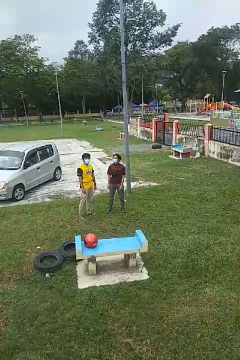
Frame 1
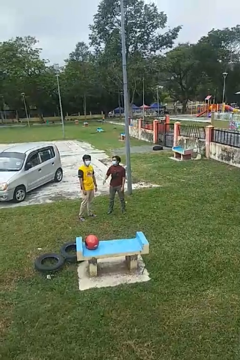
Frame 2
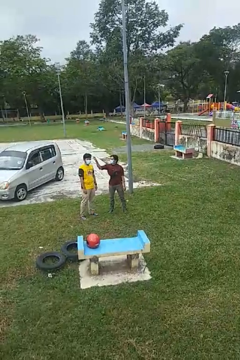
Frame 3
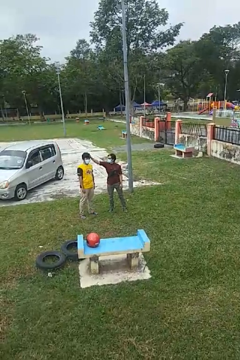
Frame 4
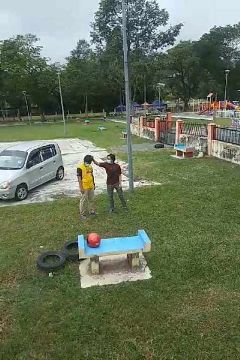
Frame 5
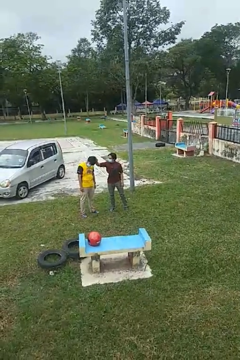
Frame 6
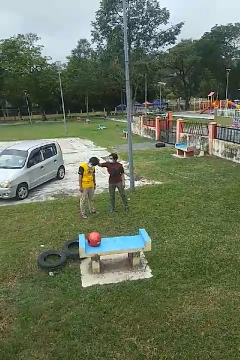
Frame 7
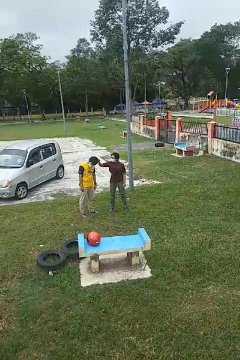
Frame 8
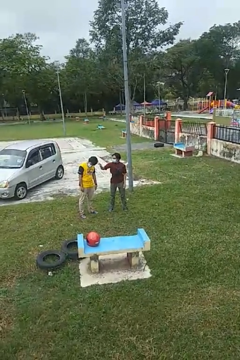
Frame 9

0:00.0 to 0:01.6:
person grabs person by hair

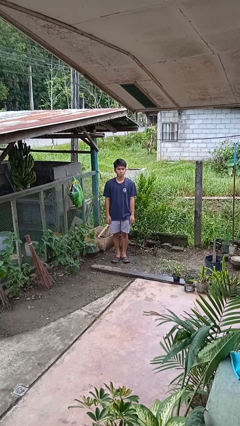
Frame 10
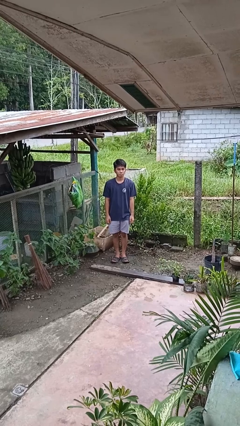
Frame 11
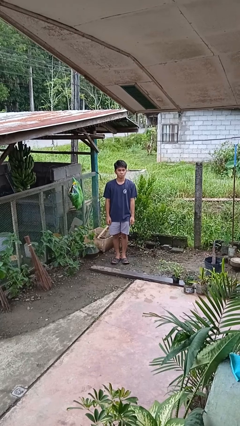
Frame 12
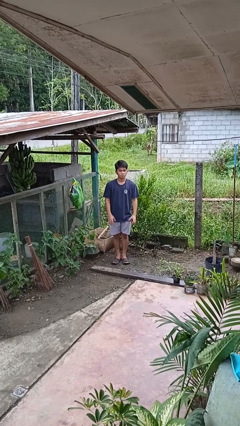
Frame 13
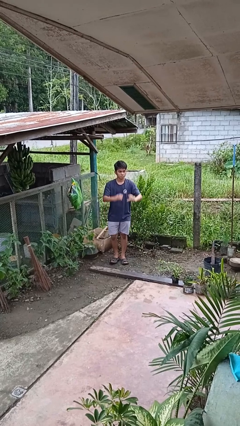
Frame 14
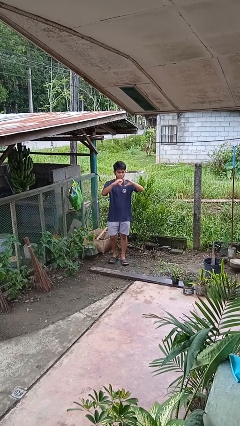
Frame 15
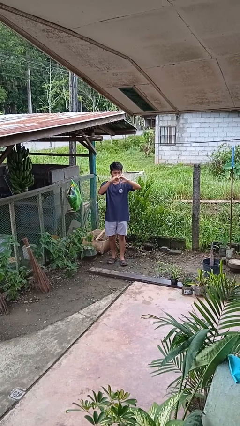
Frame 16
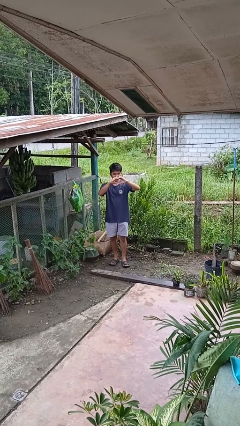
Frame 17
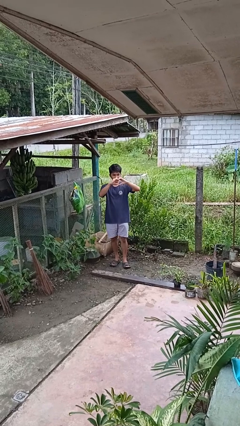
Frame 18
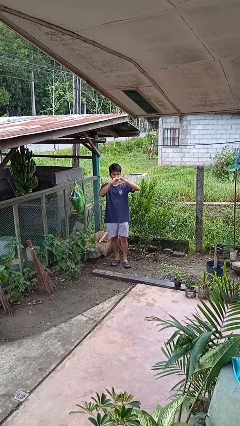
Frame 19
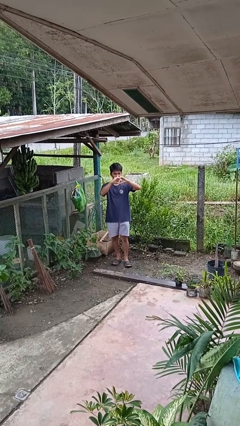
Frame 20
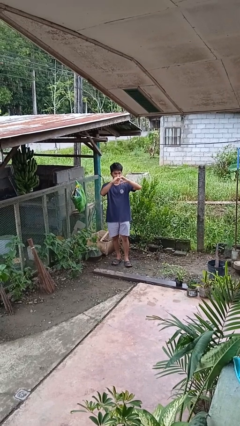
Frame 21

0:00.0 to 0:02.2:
person gestures heart

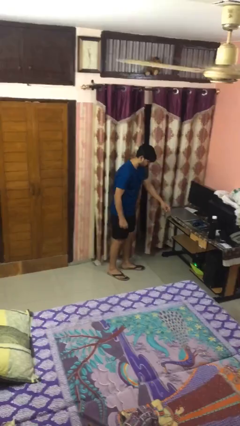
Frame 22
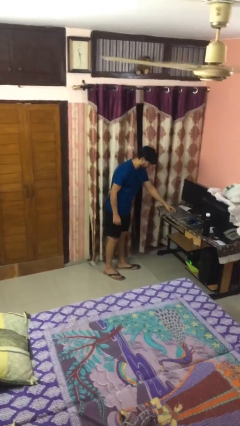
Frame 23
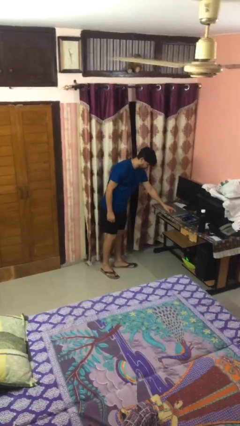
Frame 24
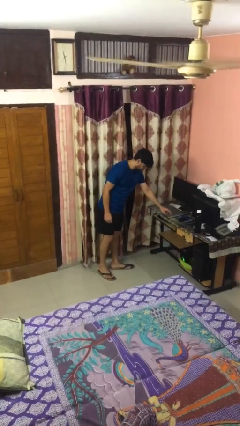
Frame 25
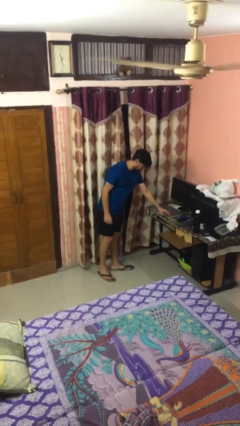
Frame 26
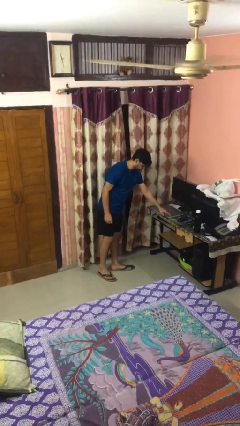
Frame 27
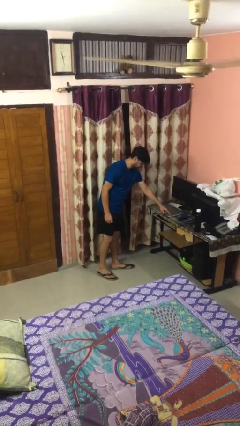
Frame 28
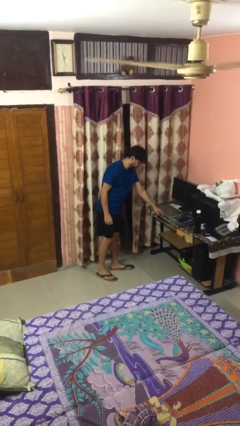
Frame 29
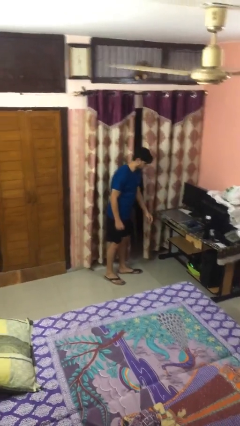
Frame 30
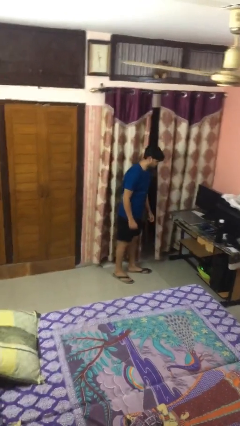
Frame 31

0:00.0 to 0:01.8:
person taps object with finger

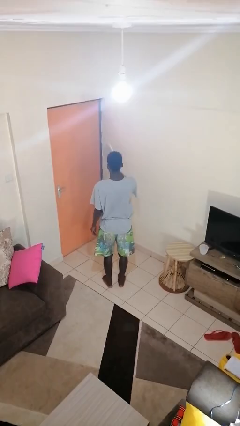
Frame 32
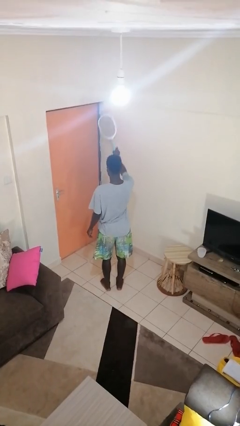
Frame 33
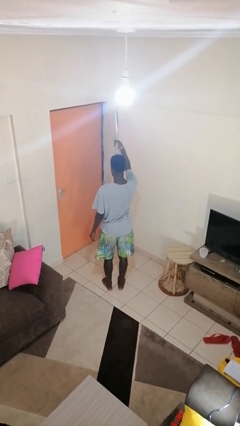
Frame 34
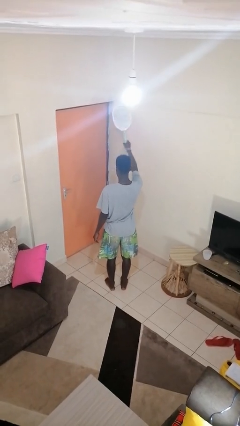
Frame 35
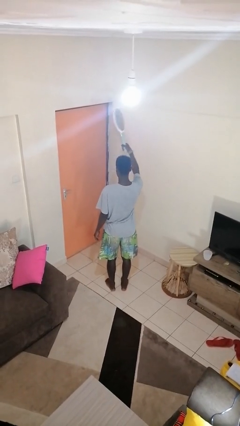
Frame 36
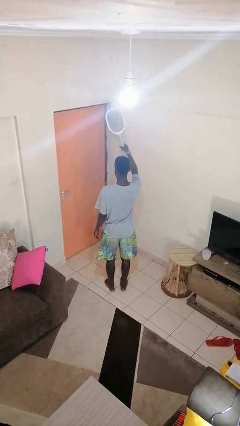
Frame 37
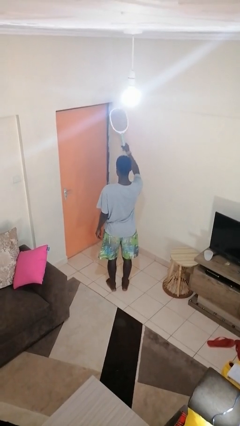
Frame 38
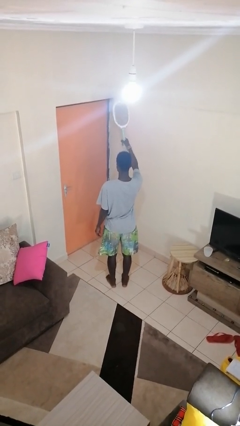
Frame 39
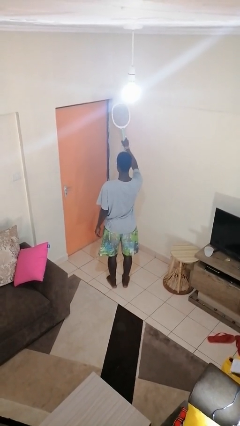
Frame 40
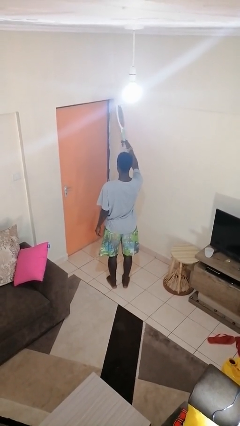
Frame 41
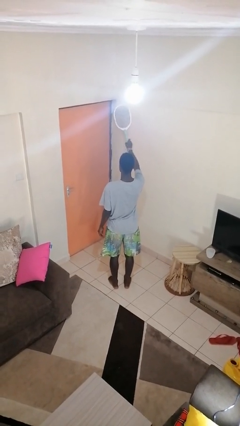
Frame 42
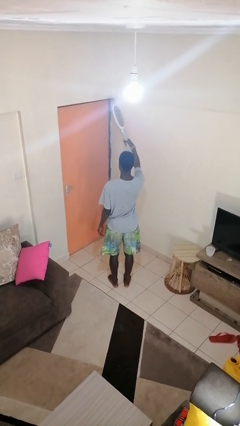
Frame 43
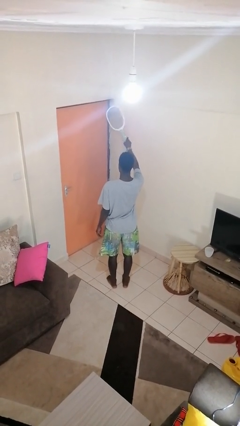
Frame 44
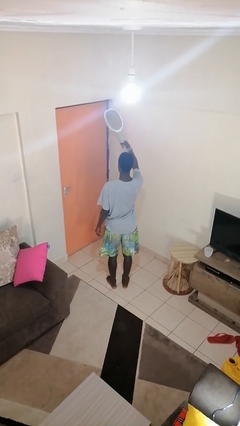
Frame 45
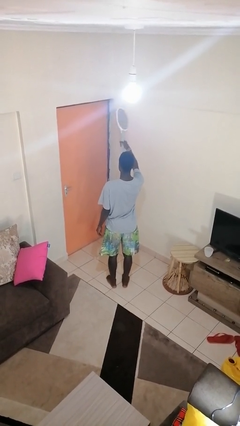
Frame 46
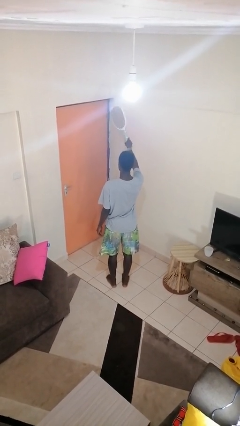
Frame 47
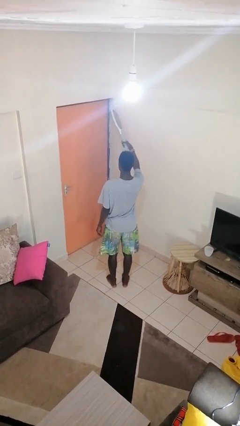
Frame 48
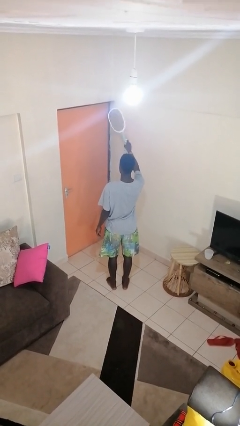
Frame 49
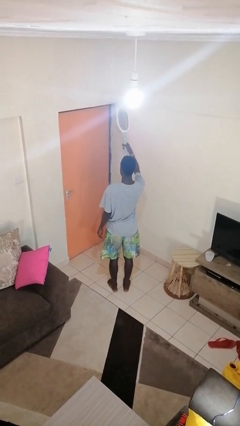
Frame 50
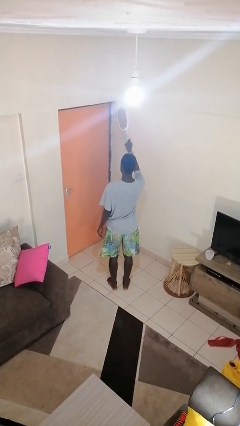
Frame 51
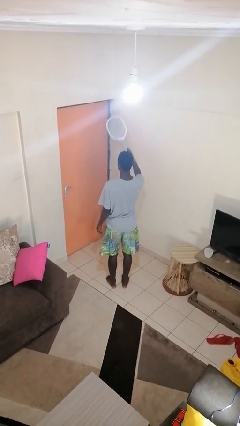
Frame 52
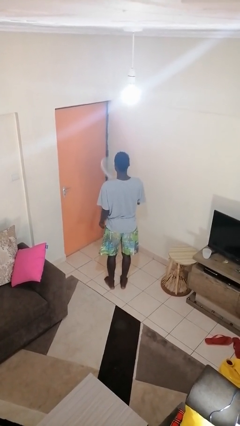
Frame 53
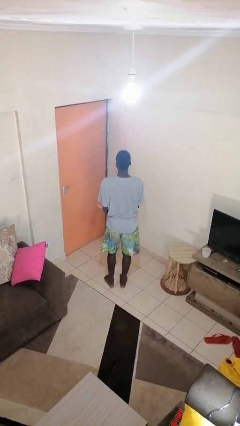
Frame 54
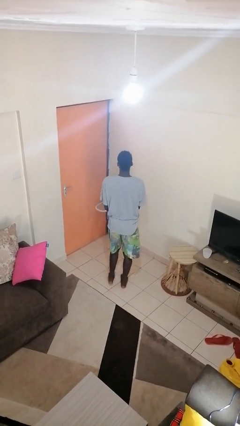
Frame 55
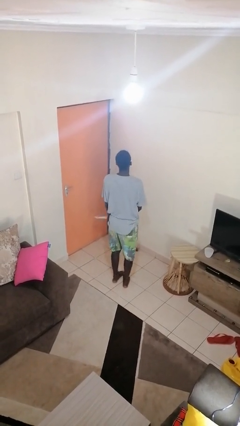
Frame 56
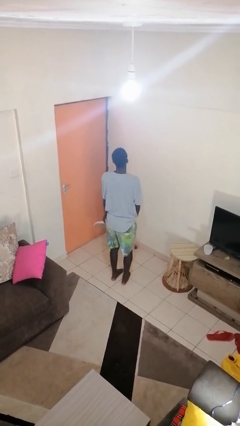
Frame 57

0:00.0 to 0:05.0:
person holds object above head

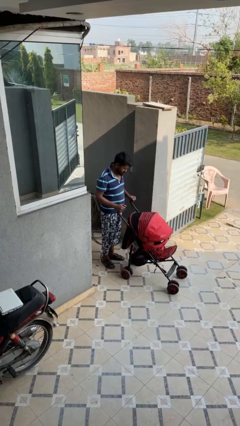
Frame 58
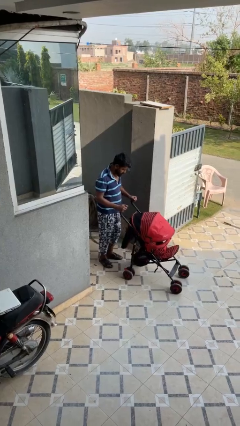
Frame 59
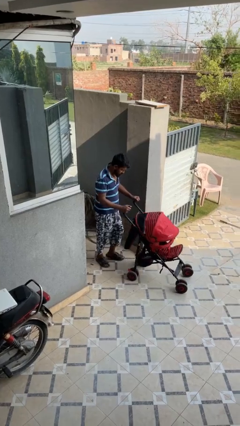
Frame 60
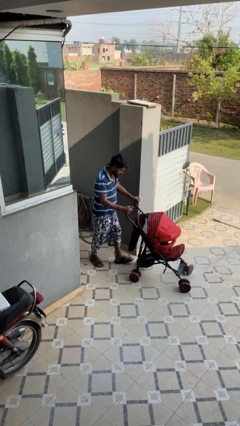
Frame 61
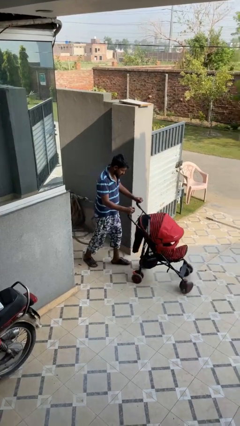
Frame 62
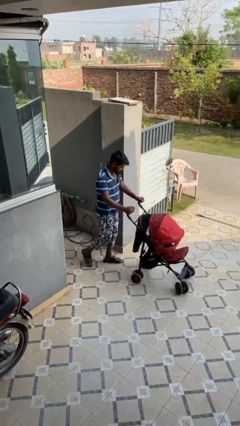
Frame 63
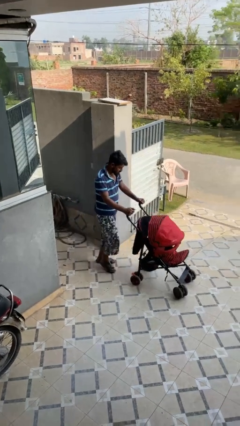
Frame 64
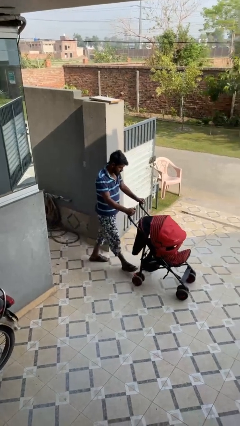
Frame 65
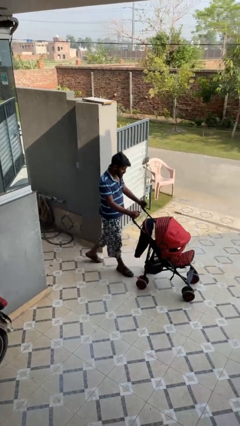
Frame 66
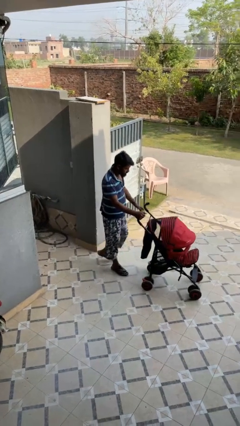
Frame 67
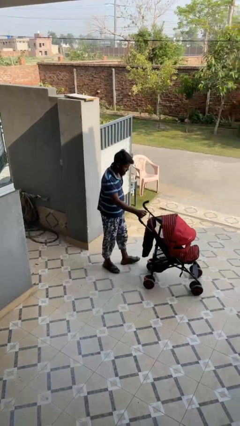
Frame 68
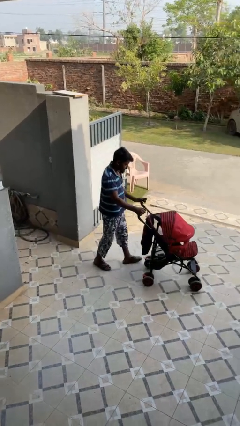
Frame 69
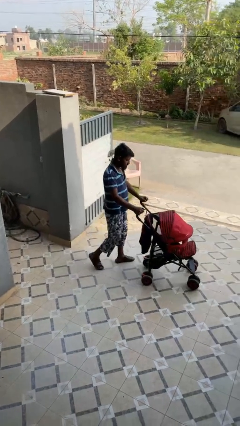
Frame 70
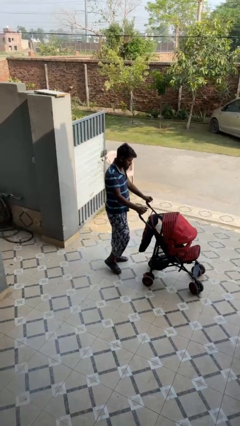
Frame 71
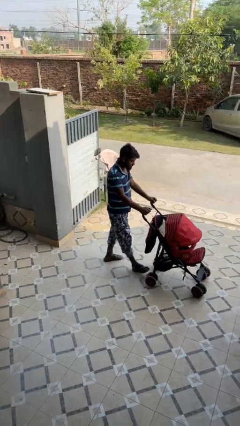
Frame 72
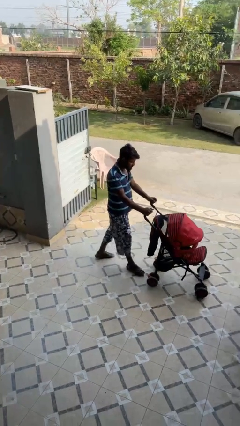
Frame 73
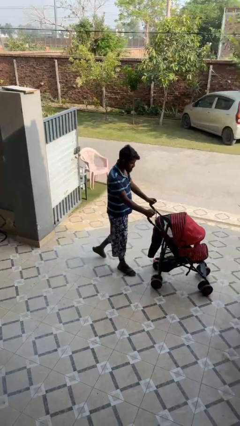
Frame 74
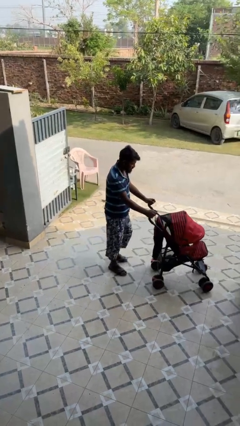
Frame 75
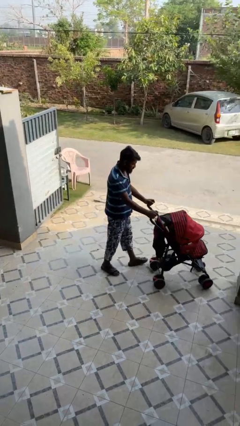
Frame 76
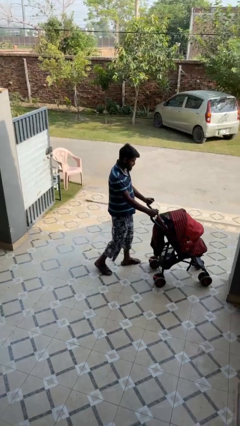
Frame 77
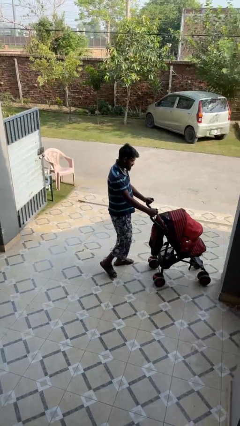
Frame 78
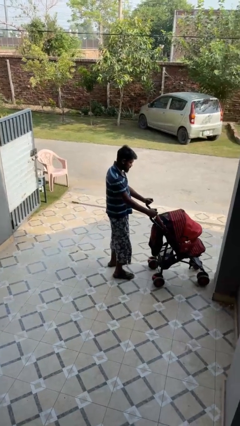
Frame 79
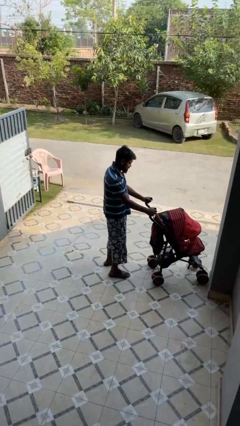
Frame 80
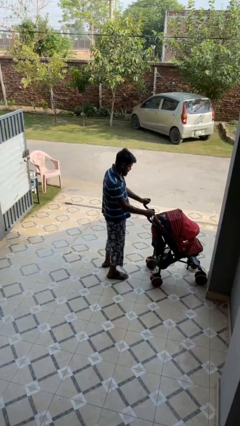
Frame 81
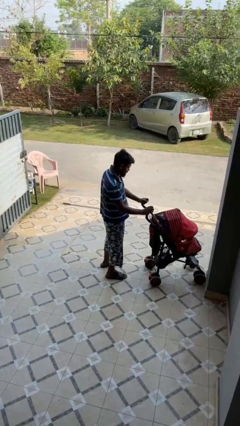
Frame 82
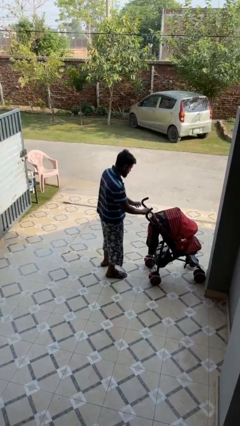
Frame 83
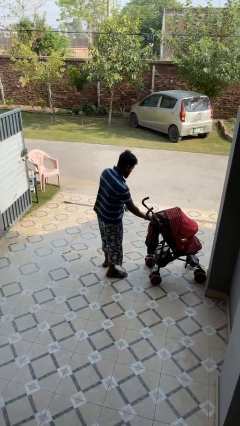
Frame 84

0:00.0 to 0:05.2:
person pushes wheeled cart

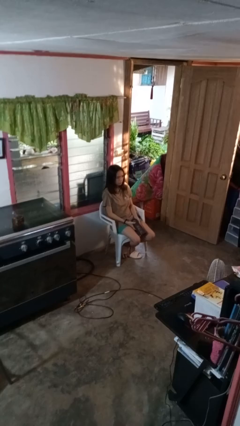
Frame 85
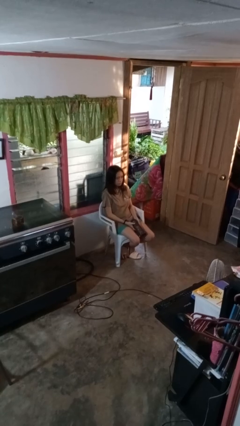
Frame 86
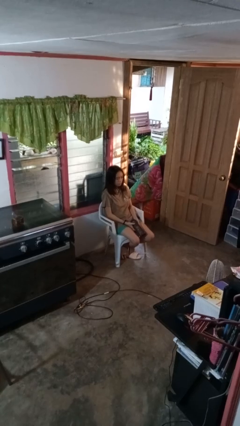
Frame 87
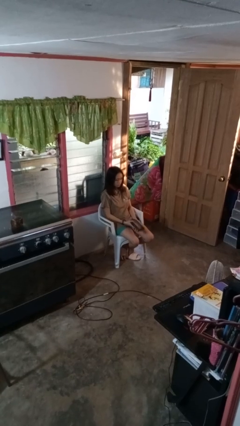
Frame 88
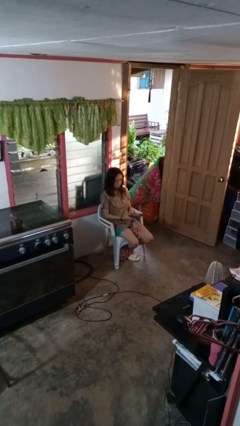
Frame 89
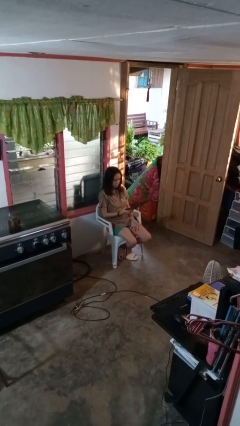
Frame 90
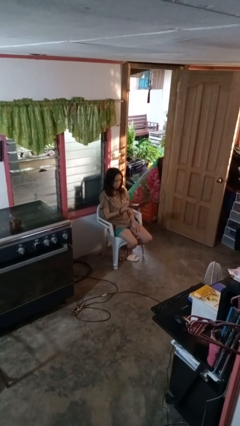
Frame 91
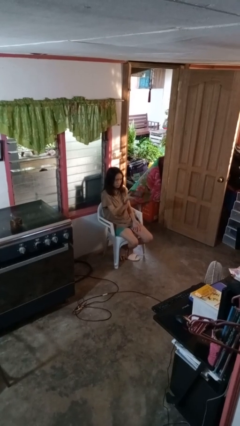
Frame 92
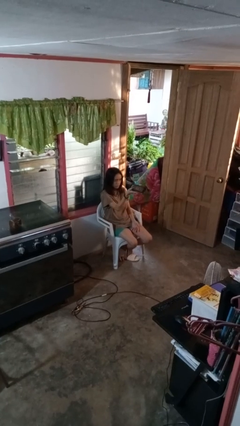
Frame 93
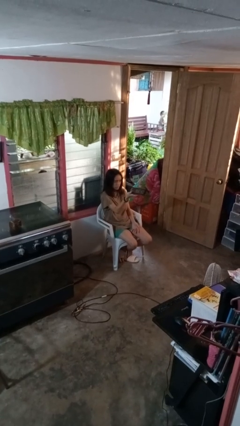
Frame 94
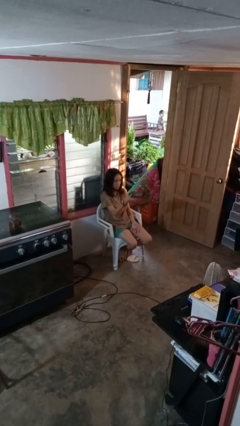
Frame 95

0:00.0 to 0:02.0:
person uses television remote
